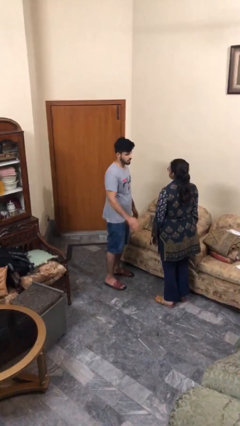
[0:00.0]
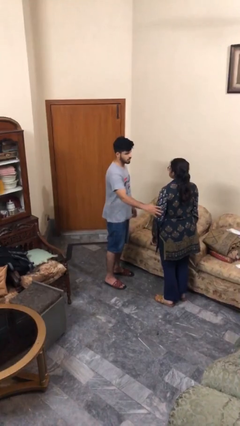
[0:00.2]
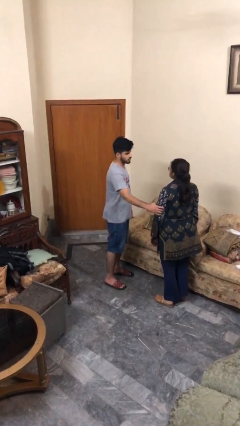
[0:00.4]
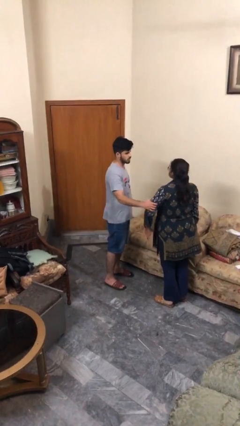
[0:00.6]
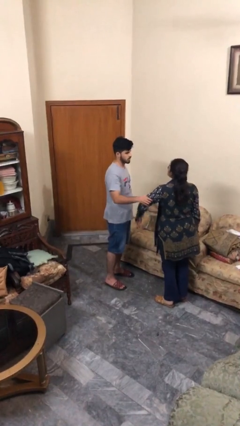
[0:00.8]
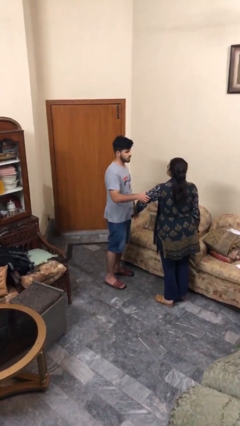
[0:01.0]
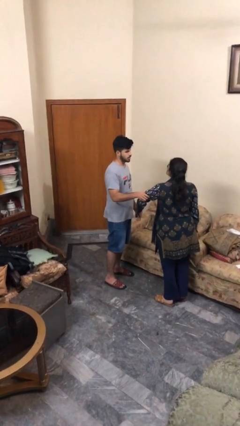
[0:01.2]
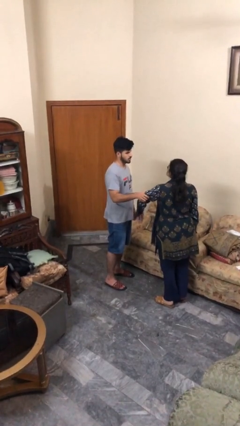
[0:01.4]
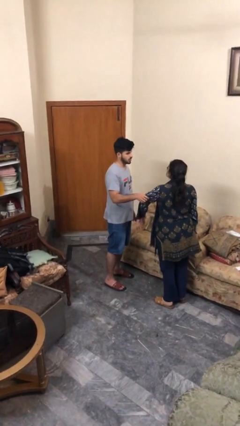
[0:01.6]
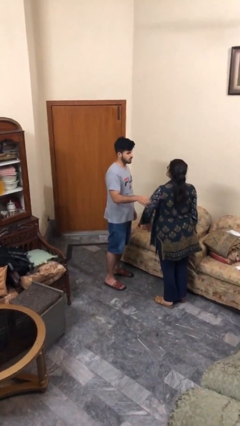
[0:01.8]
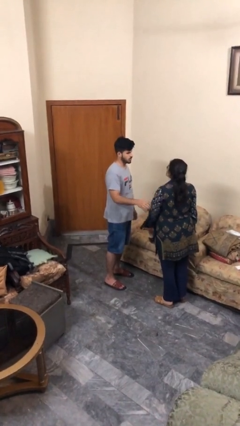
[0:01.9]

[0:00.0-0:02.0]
person grabs person by bicep

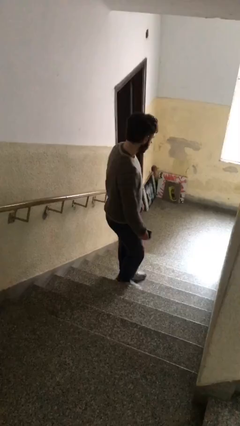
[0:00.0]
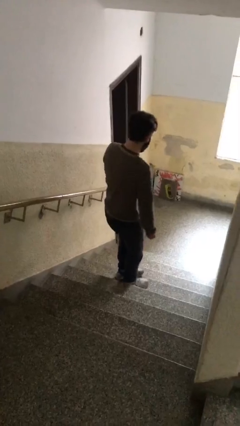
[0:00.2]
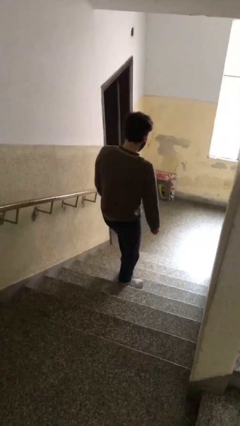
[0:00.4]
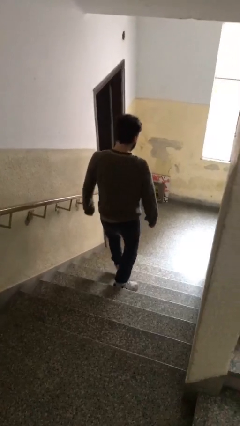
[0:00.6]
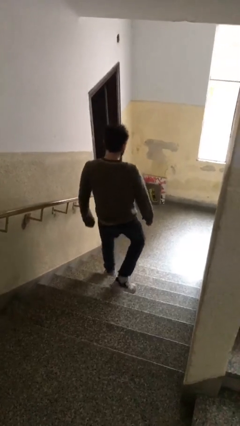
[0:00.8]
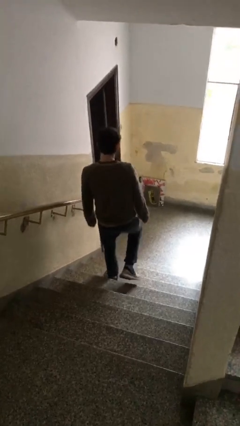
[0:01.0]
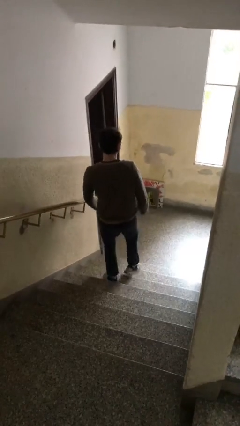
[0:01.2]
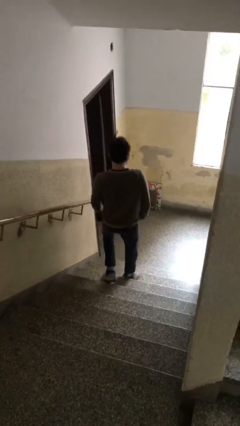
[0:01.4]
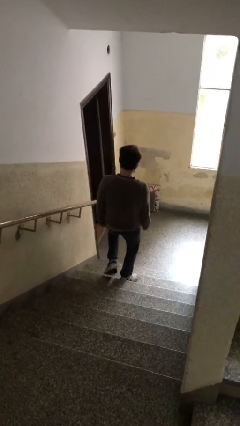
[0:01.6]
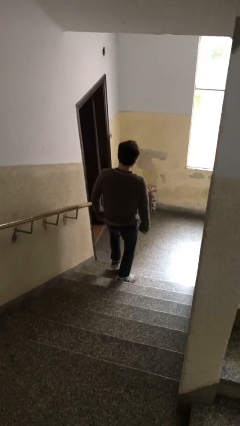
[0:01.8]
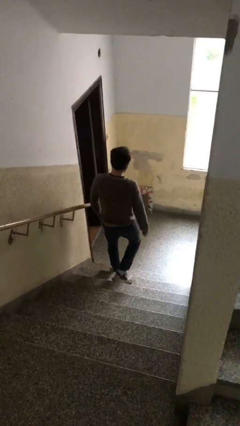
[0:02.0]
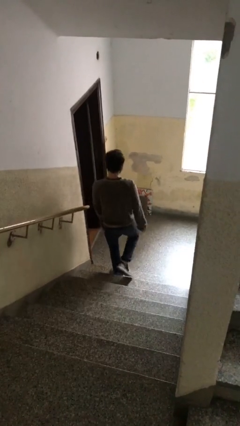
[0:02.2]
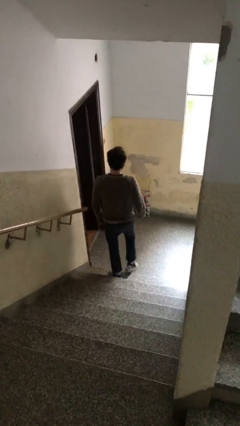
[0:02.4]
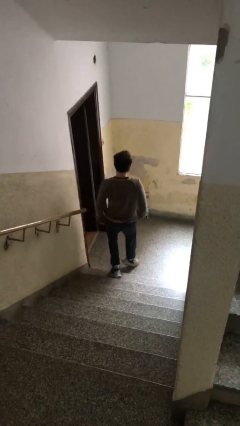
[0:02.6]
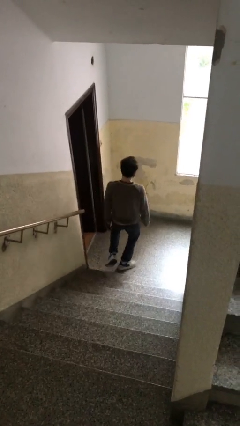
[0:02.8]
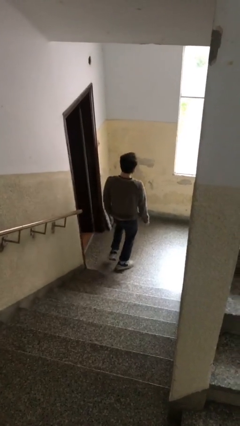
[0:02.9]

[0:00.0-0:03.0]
person climbs down stairs

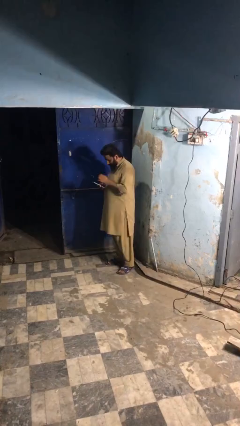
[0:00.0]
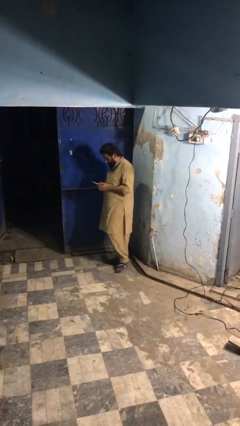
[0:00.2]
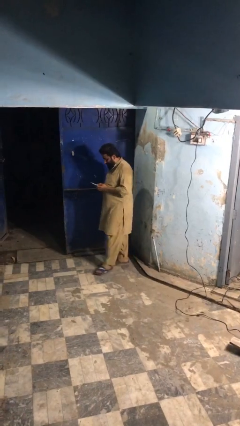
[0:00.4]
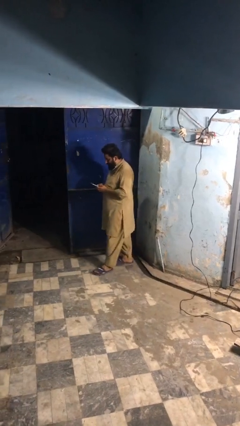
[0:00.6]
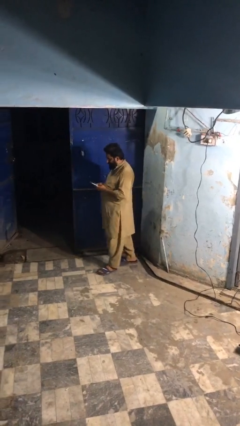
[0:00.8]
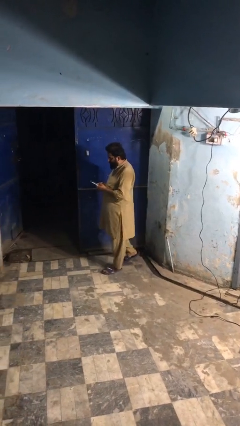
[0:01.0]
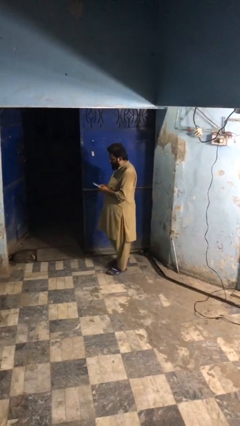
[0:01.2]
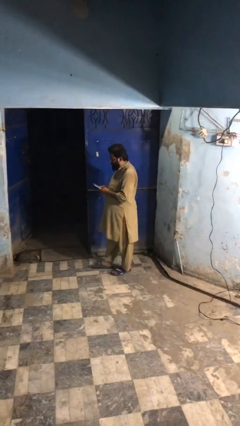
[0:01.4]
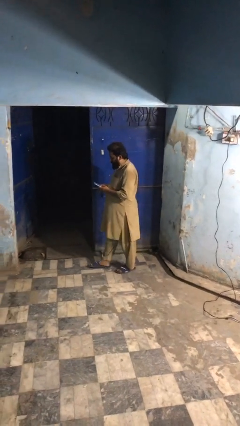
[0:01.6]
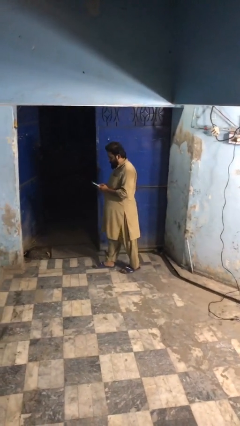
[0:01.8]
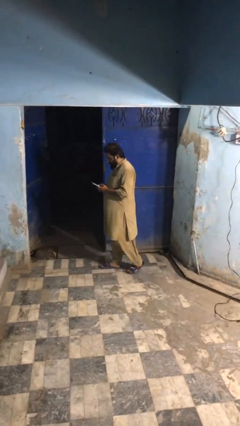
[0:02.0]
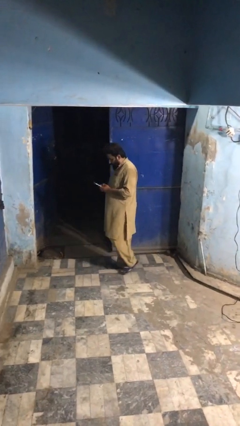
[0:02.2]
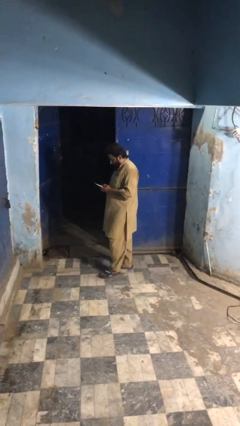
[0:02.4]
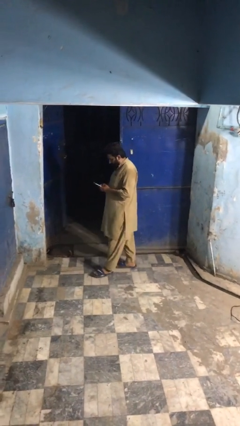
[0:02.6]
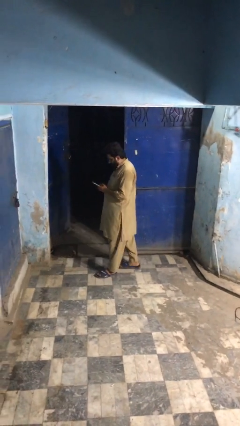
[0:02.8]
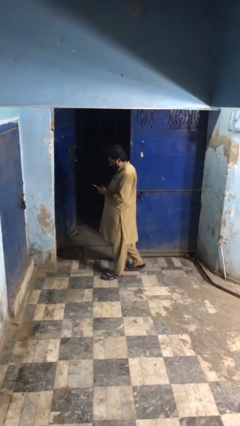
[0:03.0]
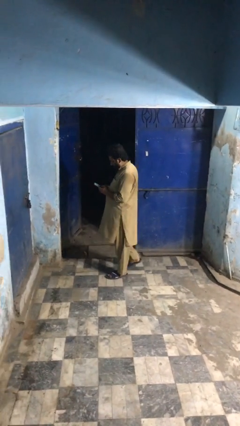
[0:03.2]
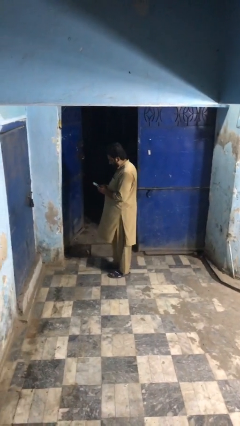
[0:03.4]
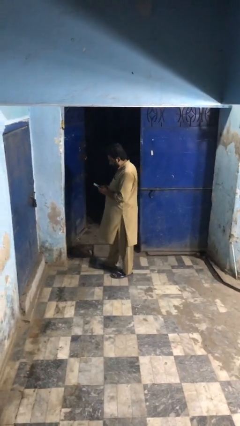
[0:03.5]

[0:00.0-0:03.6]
person texts on phone

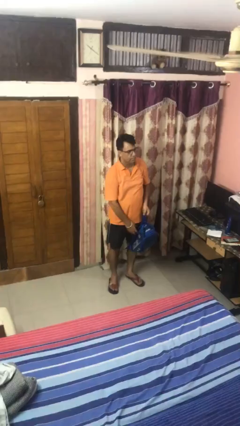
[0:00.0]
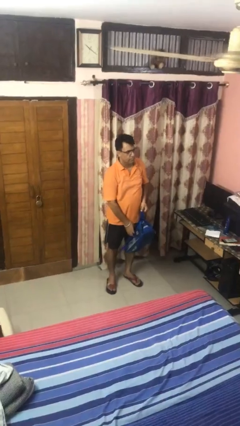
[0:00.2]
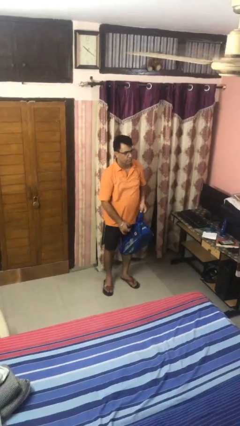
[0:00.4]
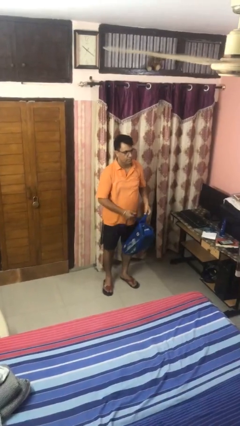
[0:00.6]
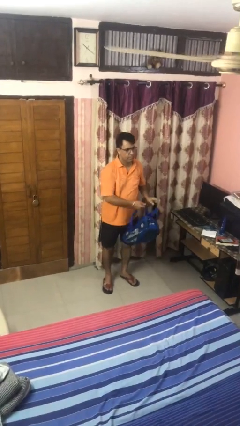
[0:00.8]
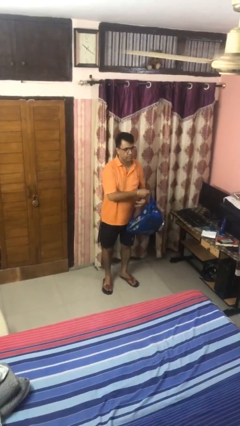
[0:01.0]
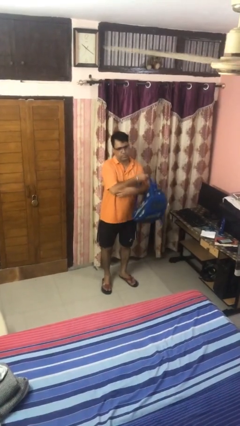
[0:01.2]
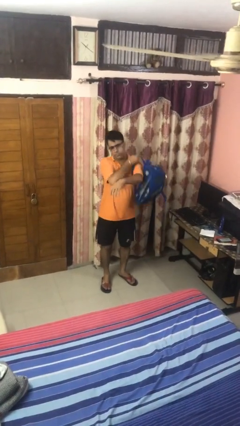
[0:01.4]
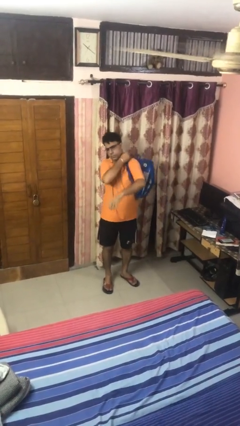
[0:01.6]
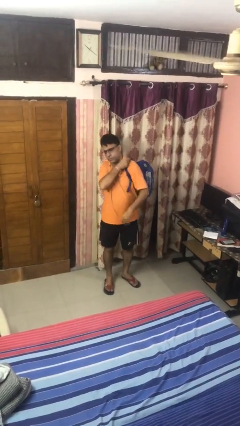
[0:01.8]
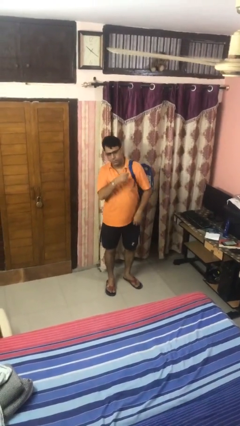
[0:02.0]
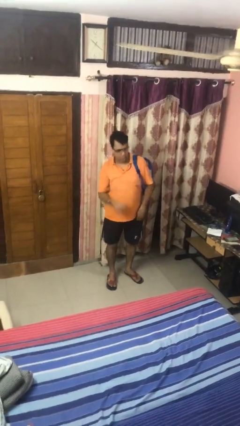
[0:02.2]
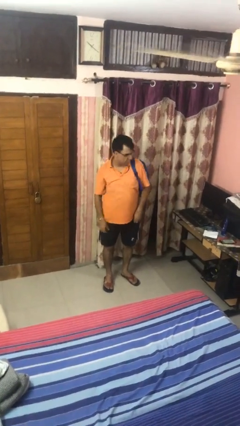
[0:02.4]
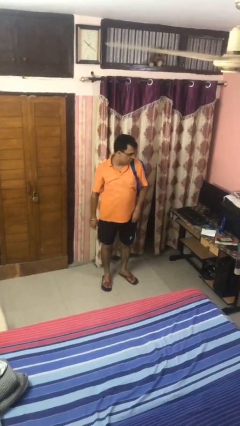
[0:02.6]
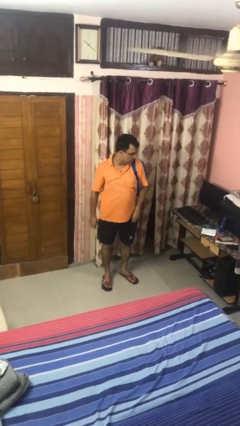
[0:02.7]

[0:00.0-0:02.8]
person puts on backpack

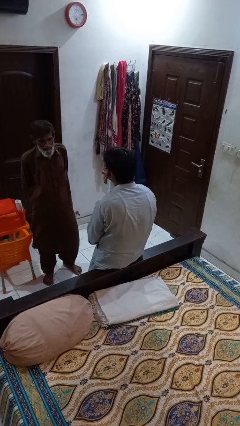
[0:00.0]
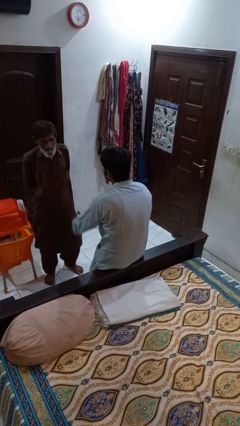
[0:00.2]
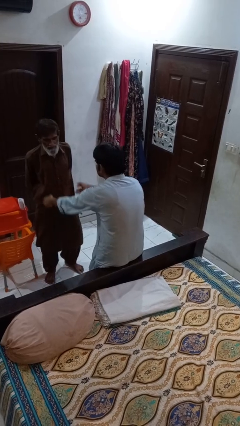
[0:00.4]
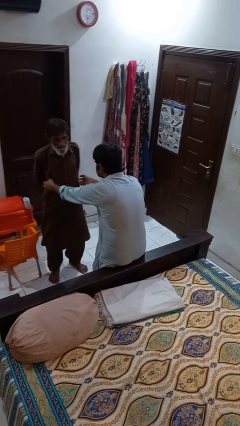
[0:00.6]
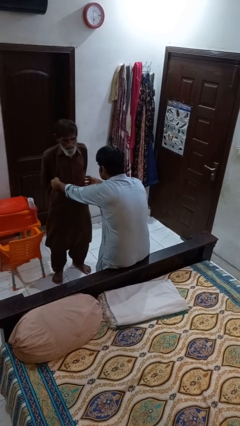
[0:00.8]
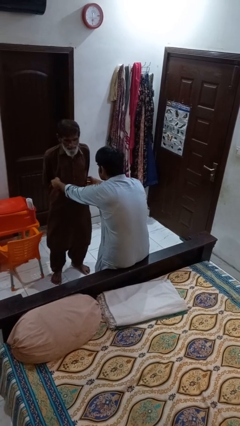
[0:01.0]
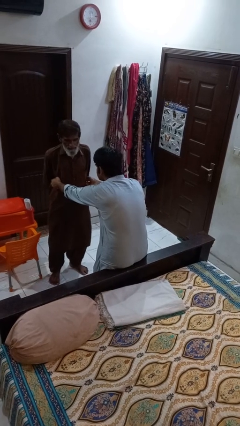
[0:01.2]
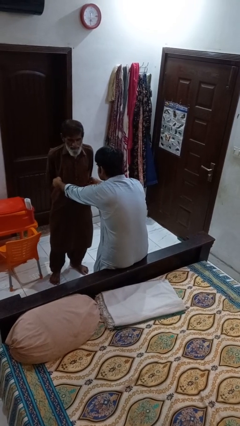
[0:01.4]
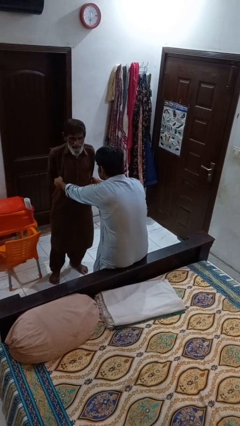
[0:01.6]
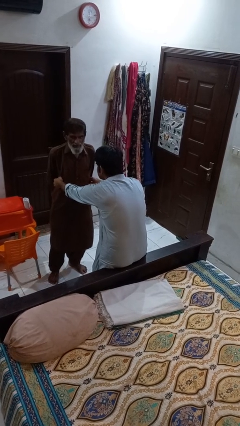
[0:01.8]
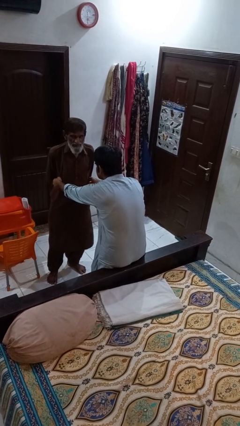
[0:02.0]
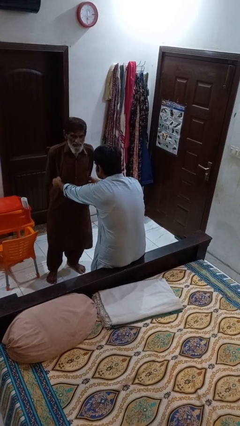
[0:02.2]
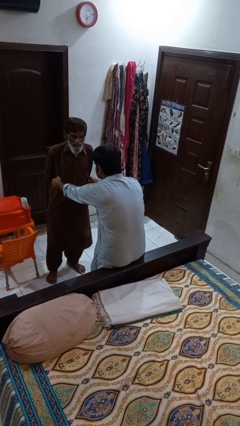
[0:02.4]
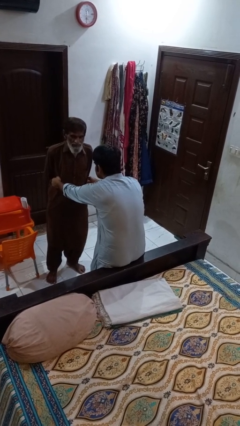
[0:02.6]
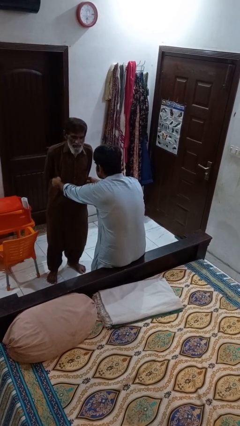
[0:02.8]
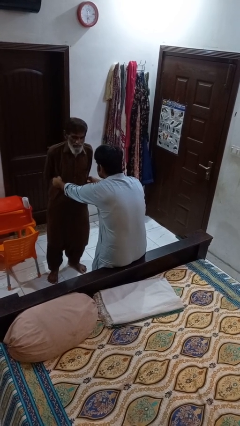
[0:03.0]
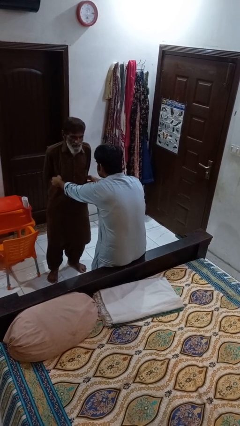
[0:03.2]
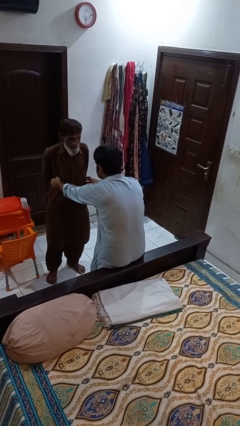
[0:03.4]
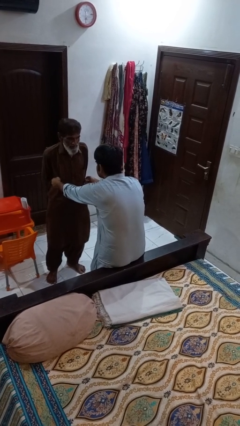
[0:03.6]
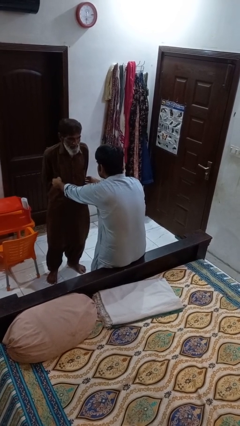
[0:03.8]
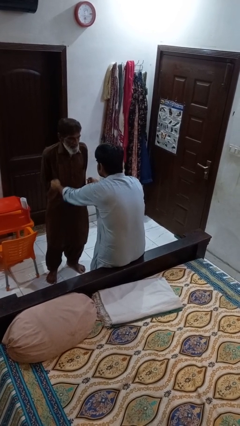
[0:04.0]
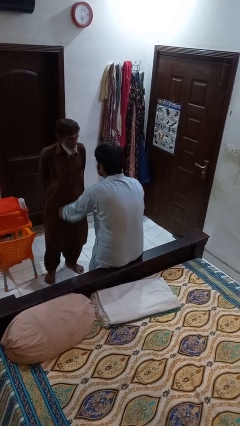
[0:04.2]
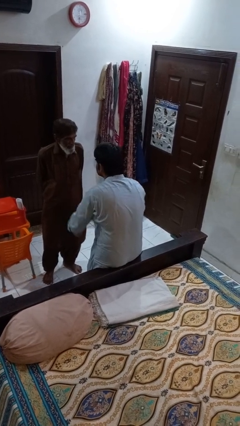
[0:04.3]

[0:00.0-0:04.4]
person tickles person

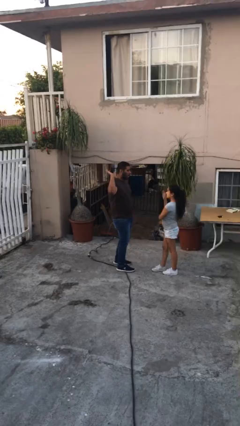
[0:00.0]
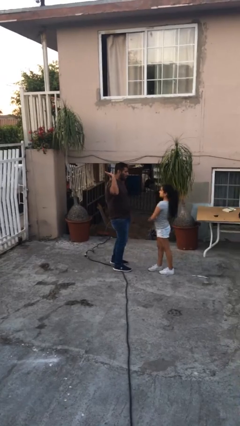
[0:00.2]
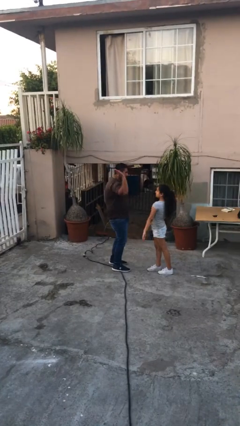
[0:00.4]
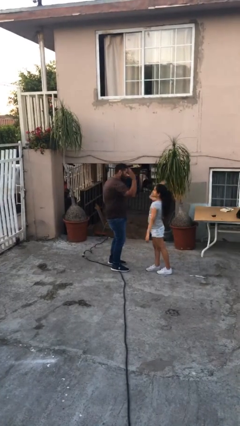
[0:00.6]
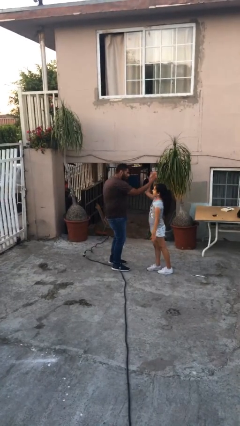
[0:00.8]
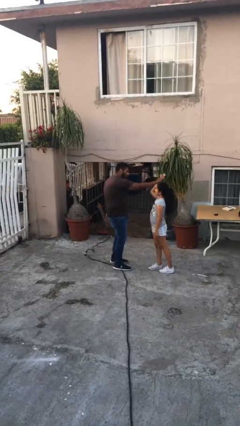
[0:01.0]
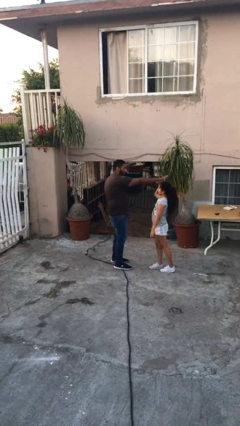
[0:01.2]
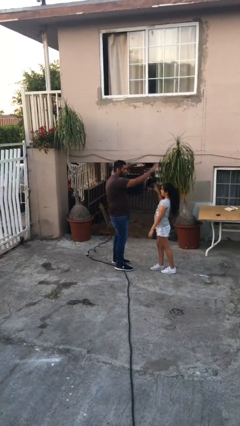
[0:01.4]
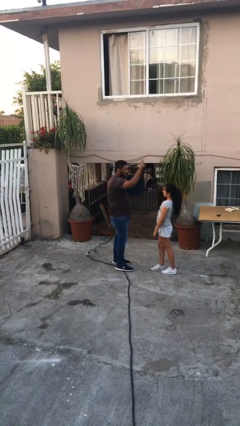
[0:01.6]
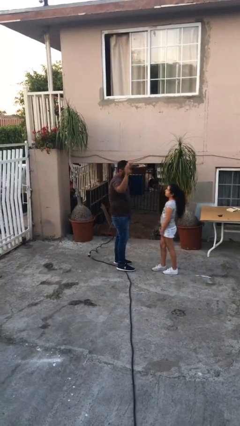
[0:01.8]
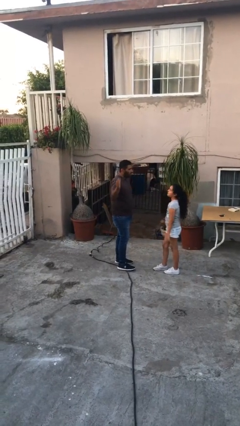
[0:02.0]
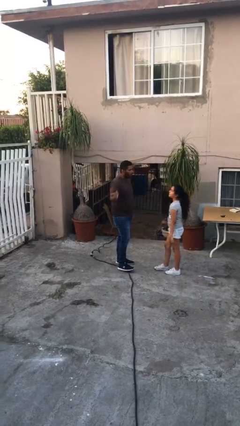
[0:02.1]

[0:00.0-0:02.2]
person highfives hand
